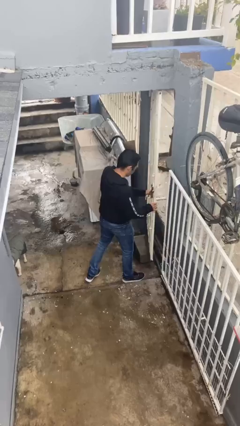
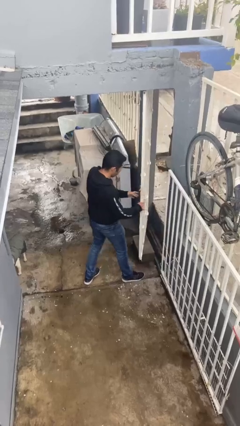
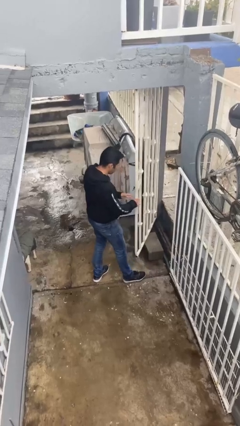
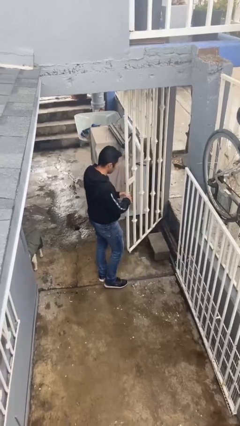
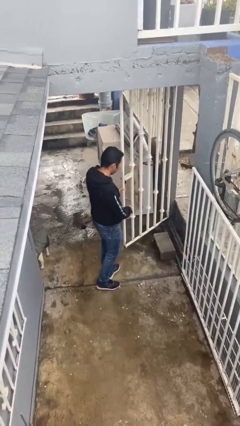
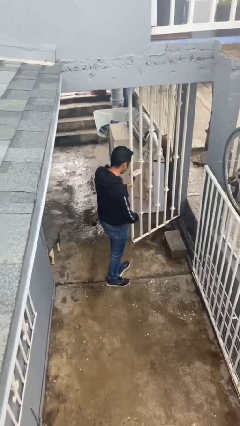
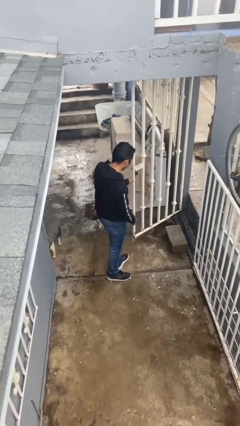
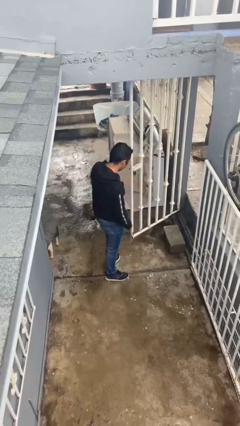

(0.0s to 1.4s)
person opens facility door

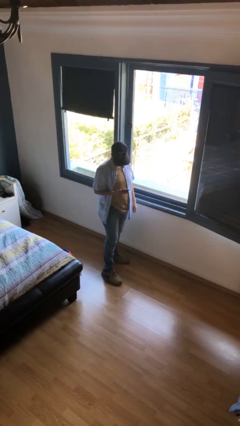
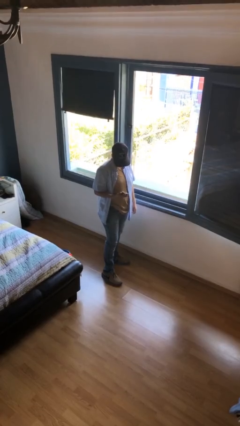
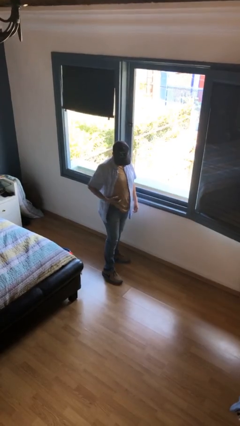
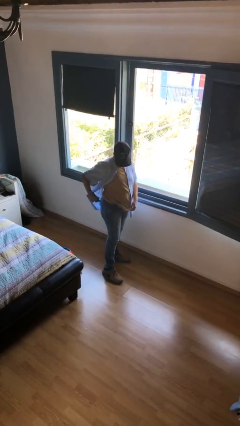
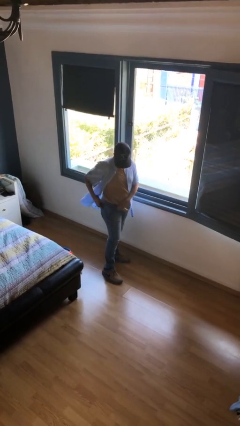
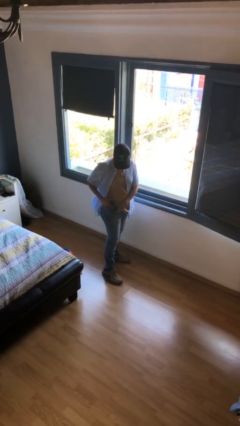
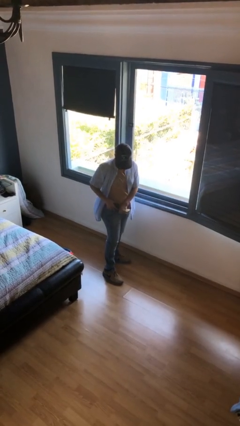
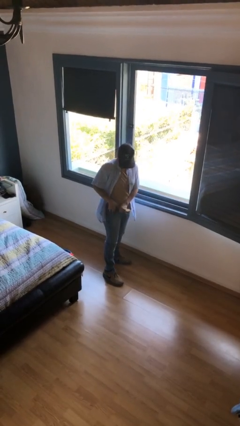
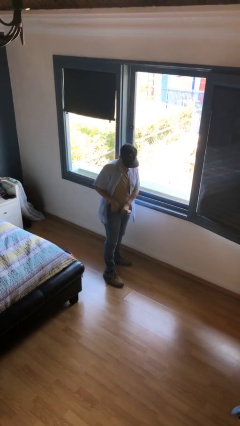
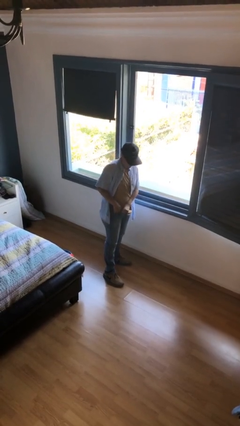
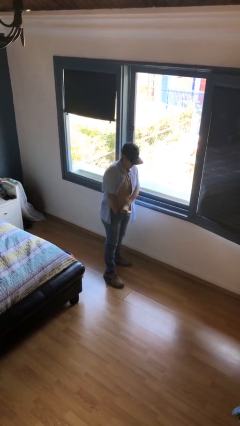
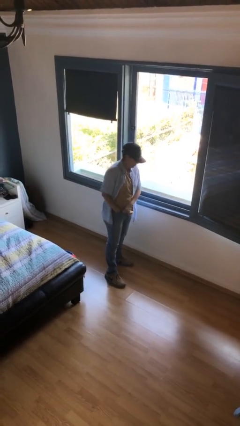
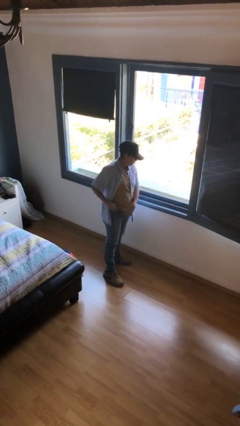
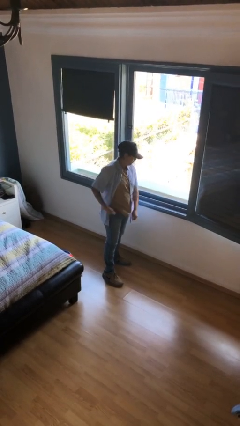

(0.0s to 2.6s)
person puts phone into pocket

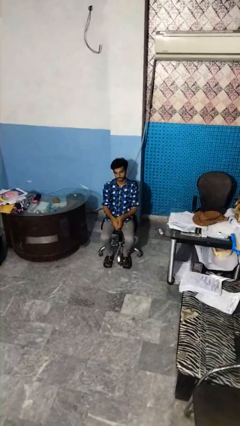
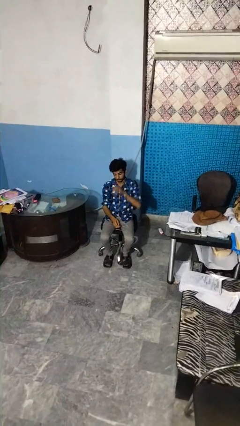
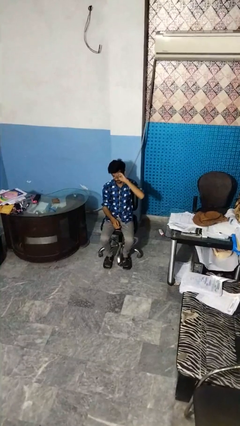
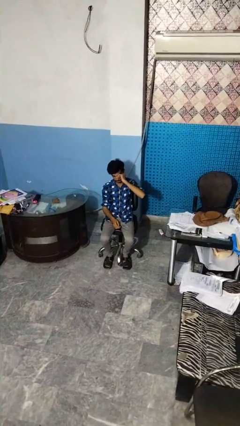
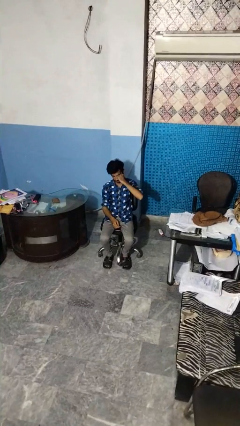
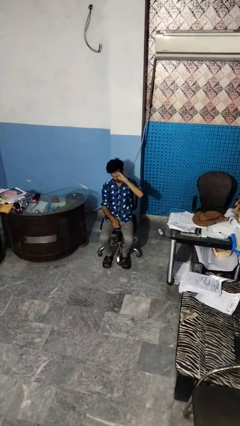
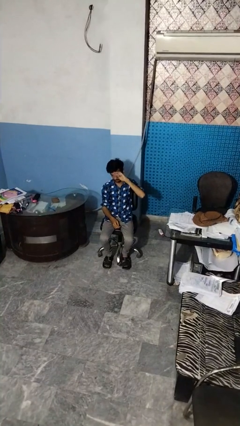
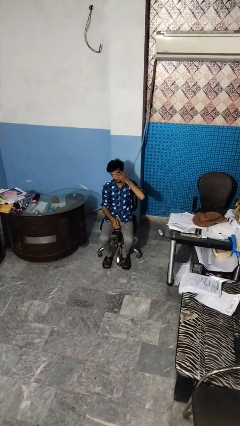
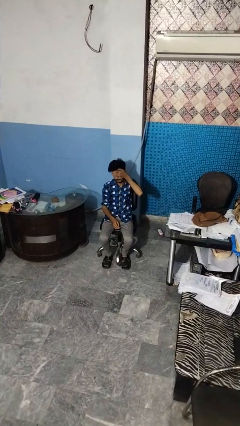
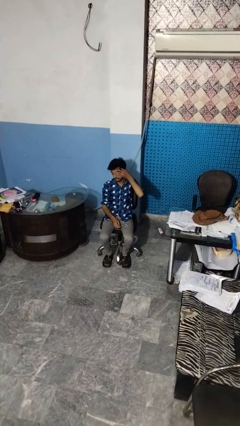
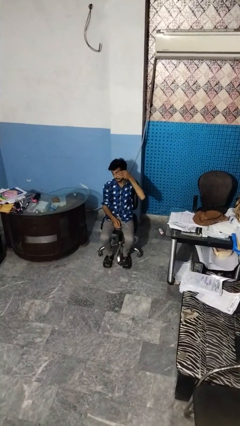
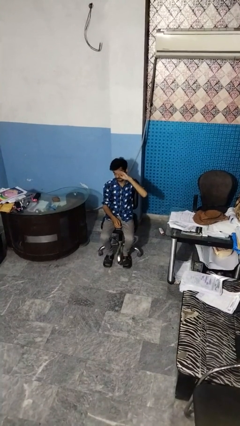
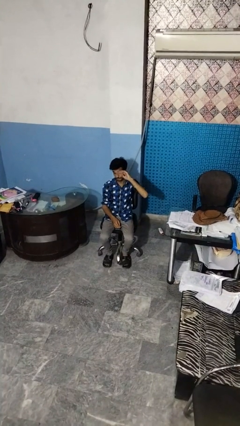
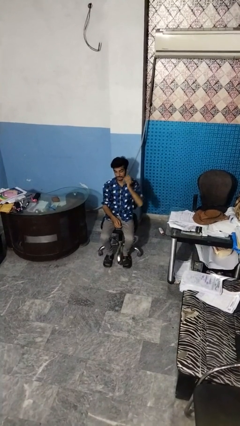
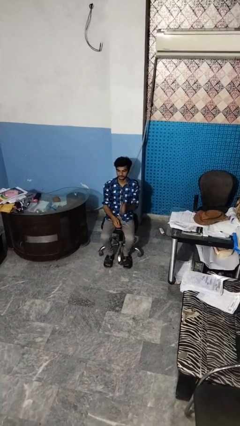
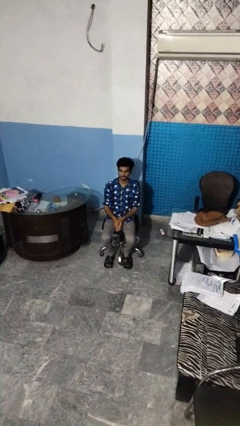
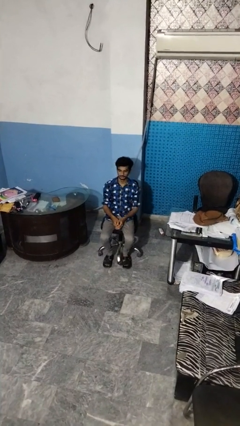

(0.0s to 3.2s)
person rubs eyes

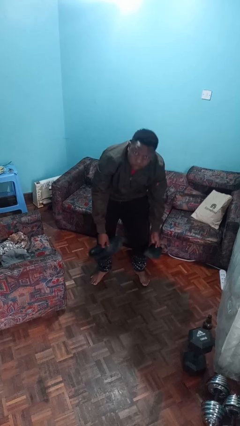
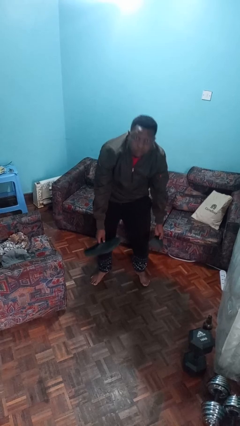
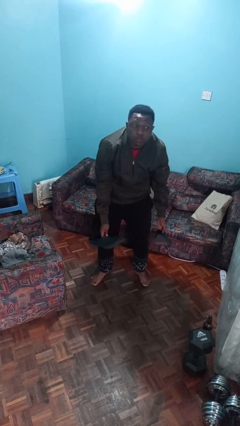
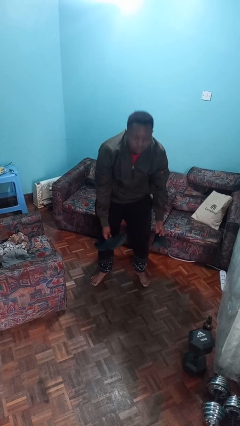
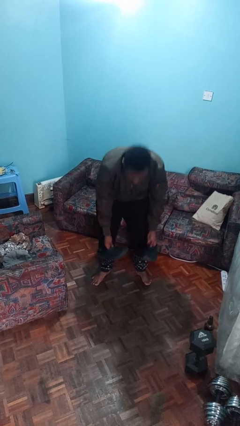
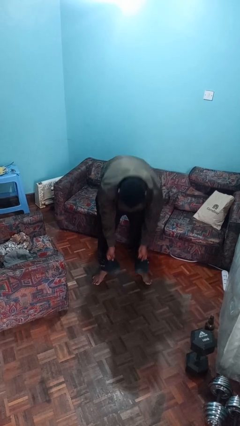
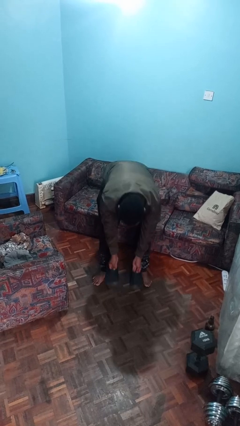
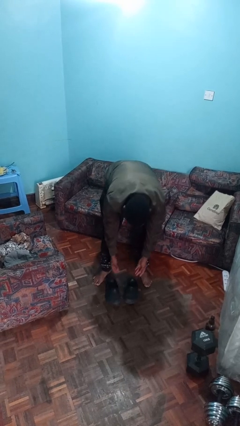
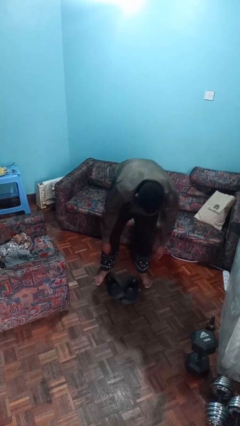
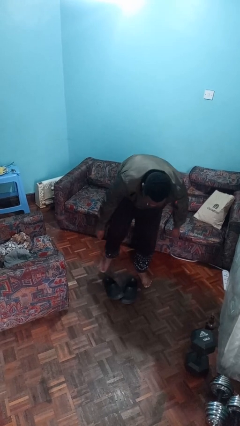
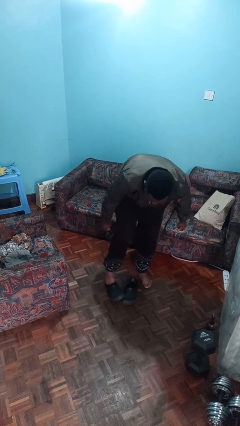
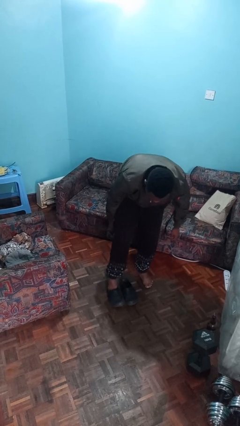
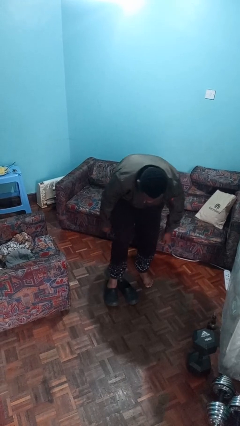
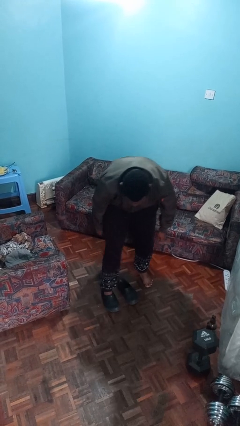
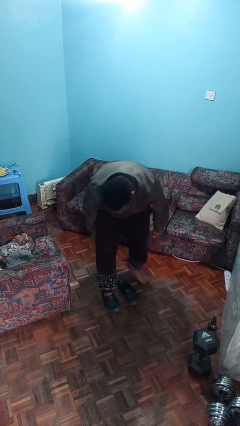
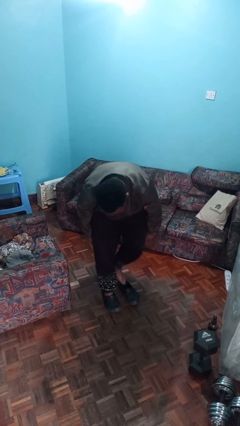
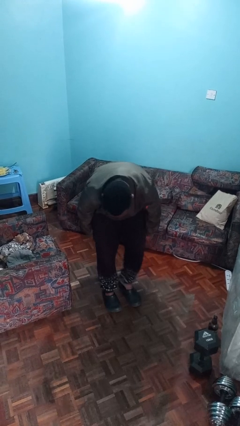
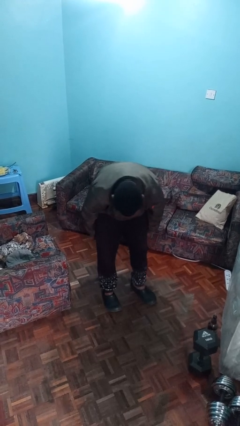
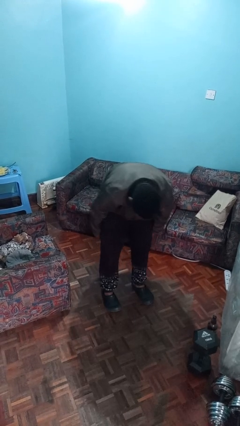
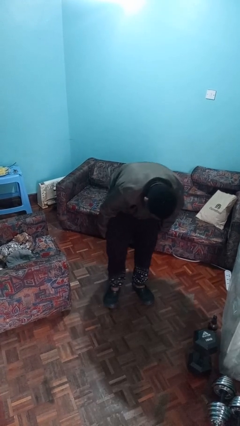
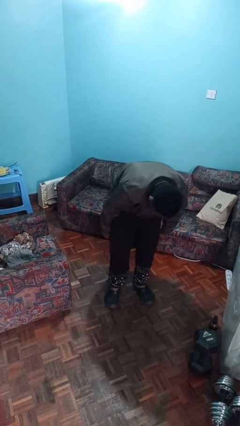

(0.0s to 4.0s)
person puts on shoes

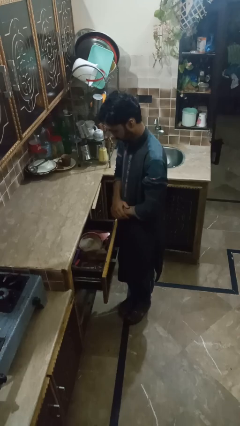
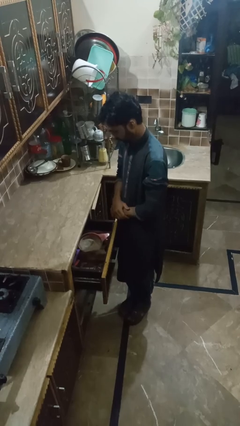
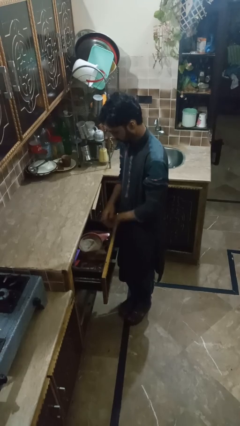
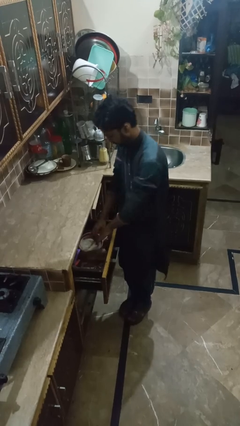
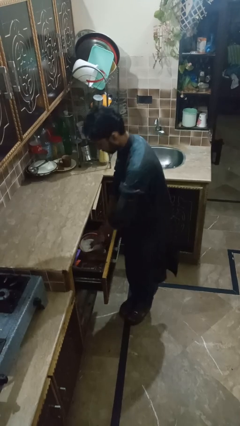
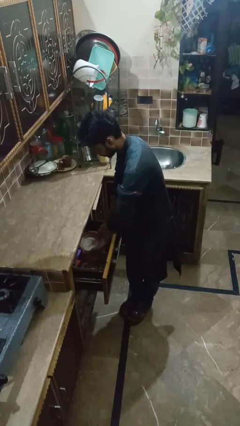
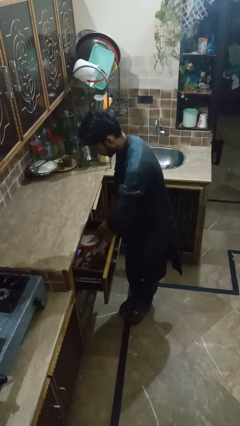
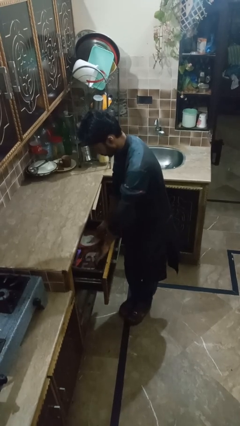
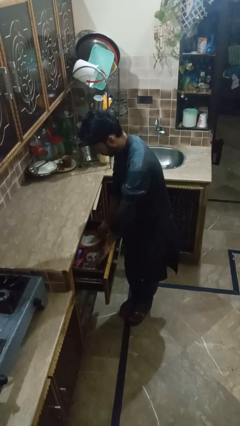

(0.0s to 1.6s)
person searches in kitchen drawer

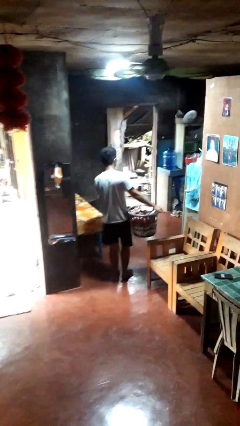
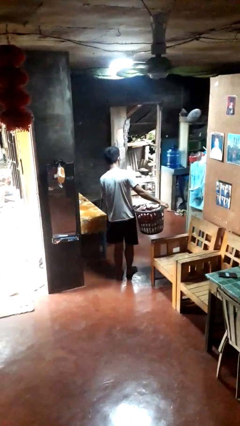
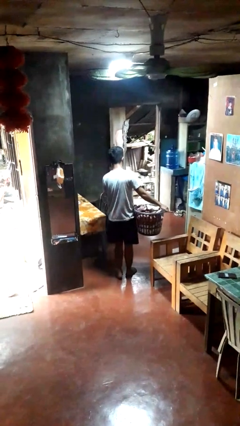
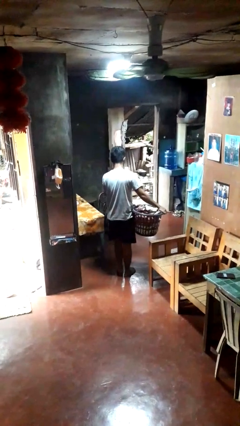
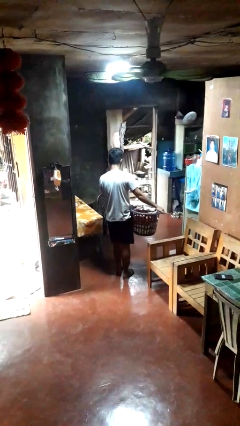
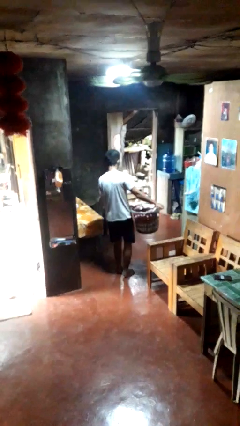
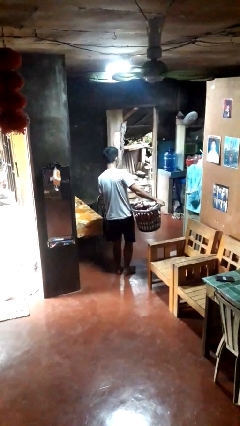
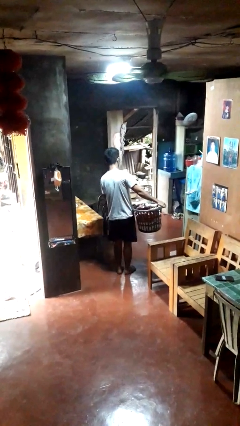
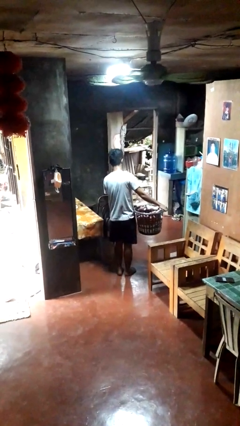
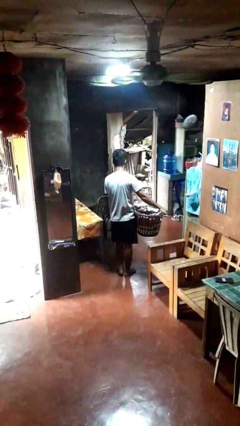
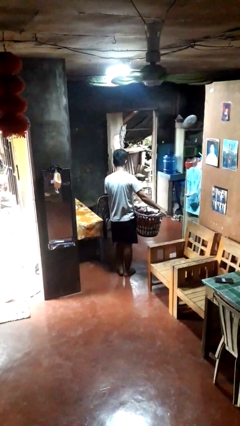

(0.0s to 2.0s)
person carries laundry basket

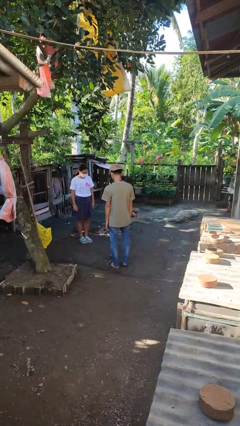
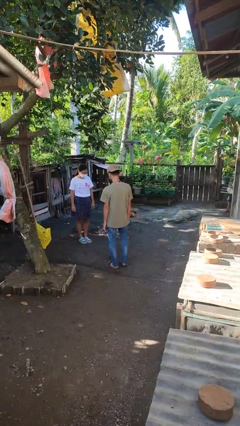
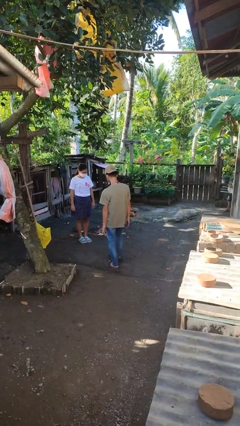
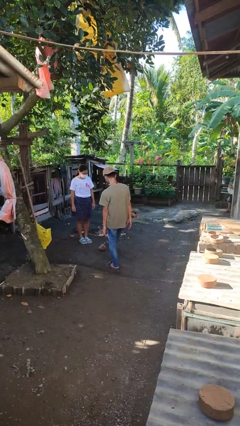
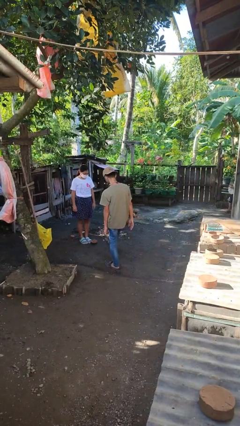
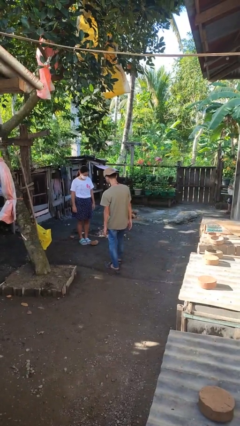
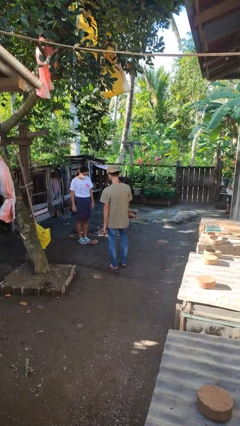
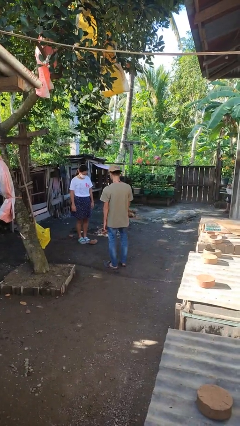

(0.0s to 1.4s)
person kicks object to person

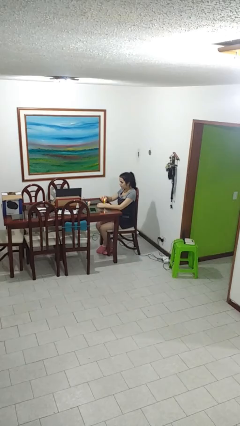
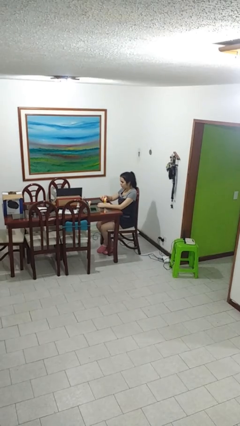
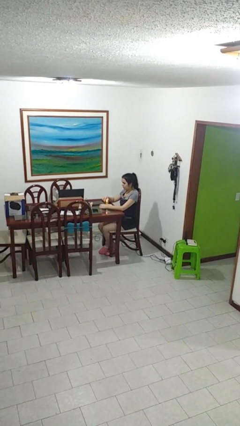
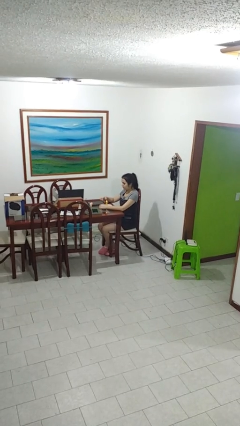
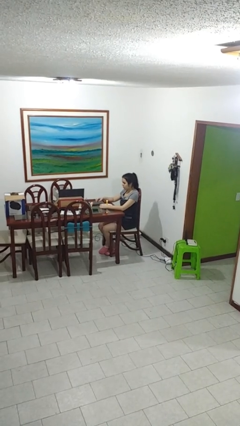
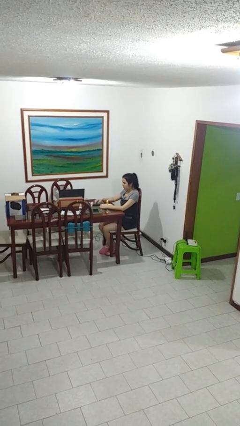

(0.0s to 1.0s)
person lights candle
